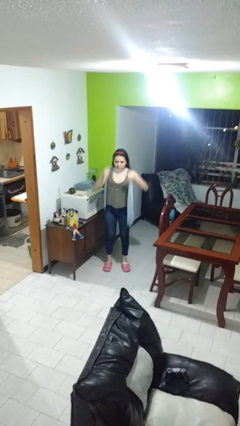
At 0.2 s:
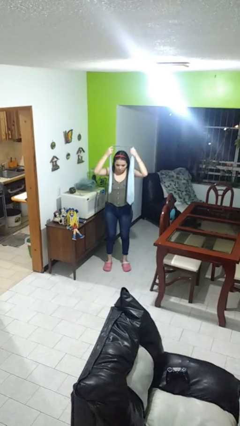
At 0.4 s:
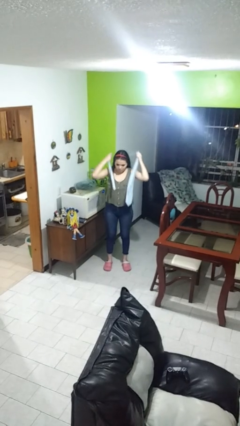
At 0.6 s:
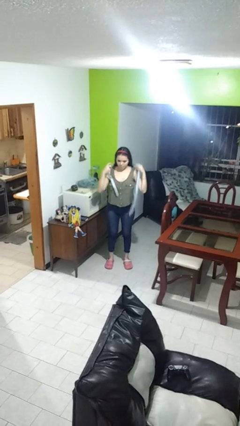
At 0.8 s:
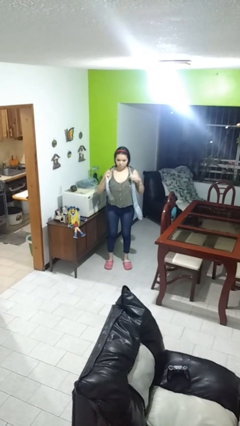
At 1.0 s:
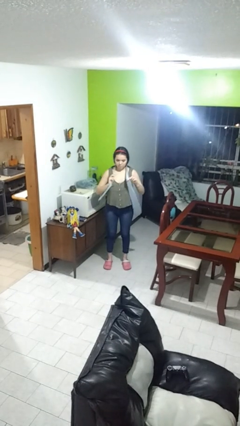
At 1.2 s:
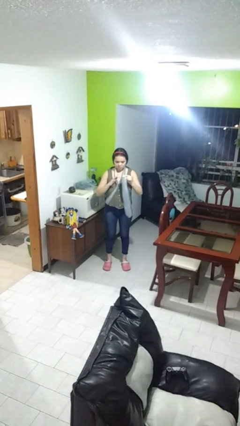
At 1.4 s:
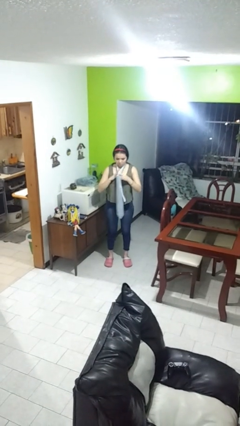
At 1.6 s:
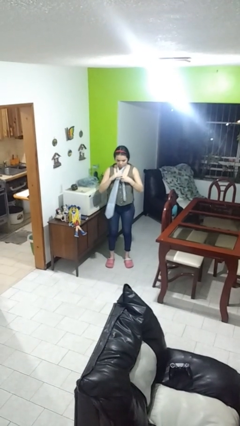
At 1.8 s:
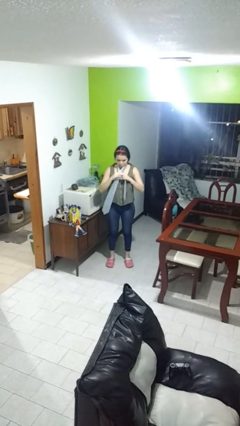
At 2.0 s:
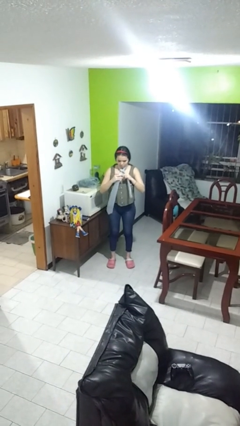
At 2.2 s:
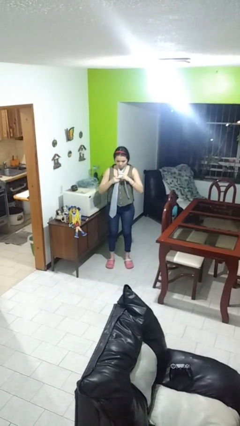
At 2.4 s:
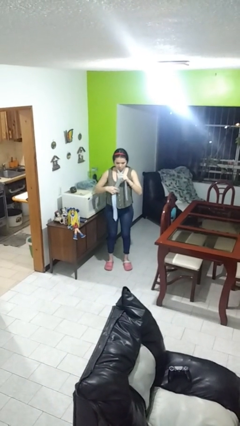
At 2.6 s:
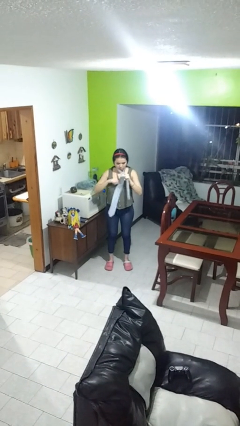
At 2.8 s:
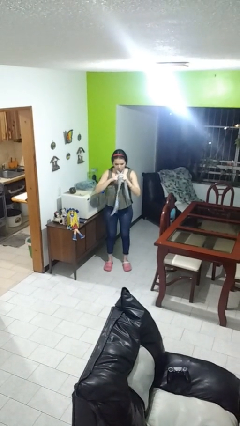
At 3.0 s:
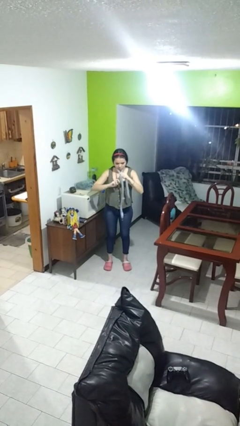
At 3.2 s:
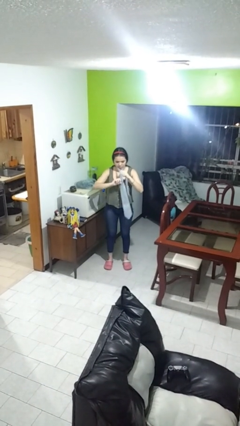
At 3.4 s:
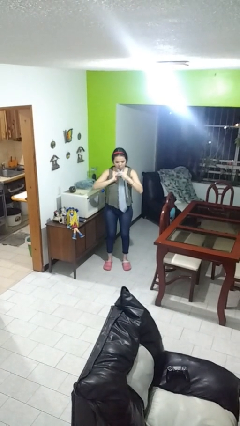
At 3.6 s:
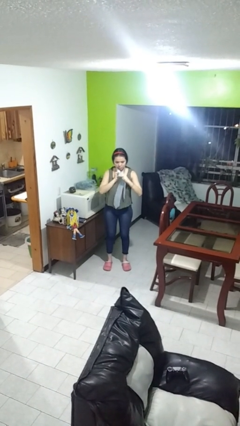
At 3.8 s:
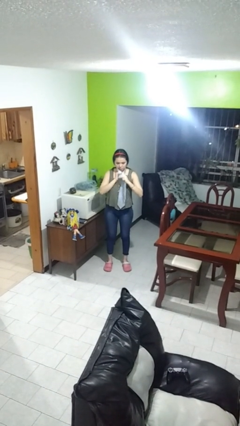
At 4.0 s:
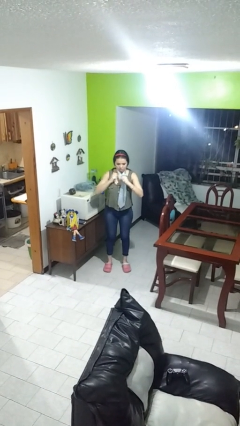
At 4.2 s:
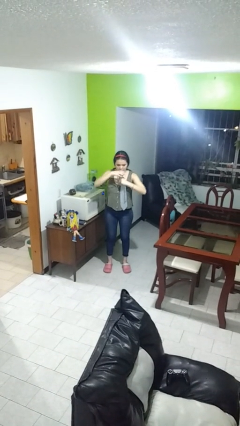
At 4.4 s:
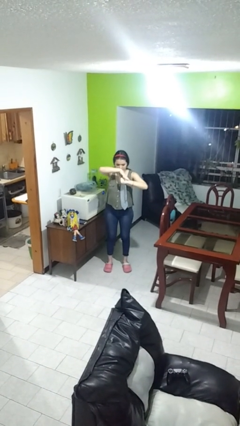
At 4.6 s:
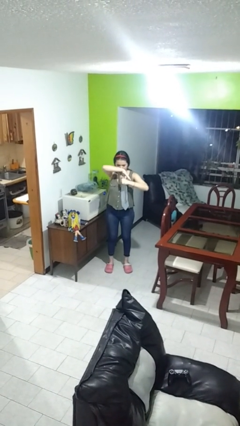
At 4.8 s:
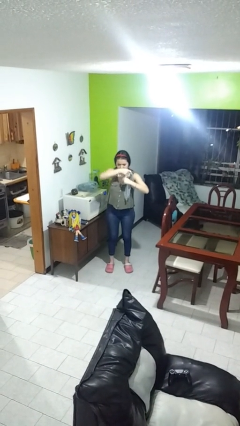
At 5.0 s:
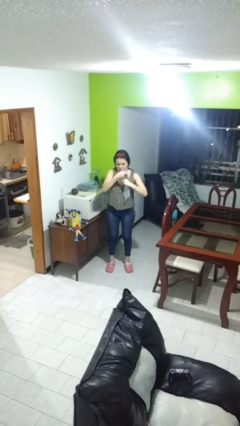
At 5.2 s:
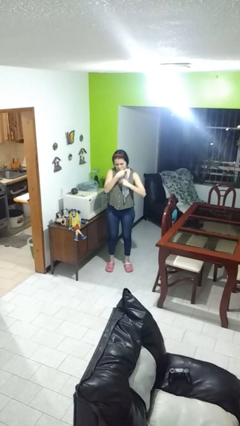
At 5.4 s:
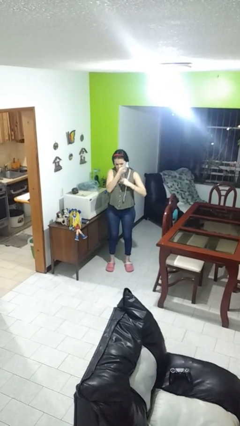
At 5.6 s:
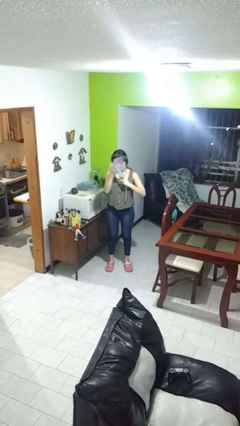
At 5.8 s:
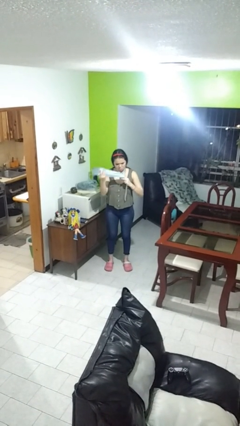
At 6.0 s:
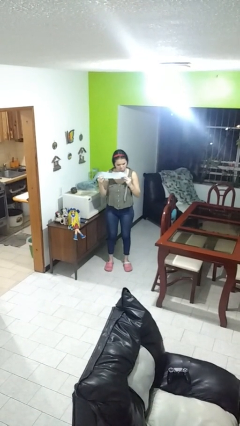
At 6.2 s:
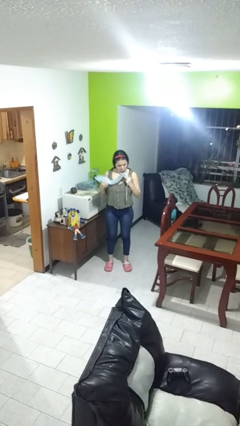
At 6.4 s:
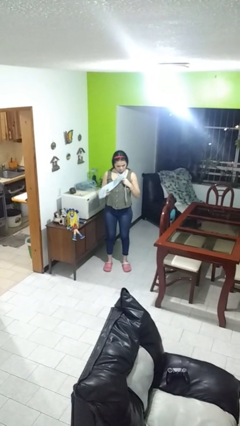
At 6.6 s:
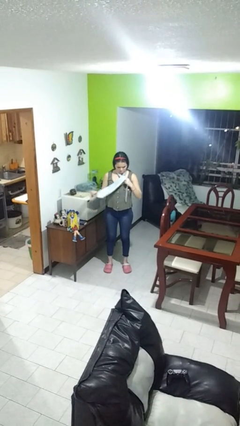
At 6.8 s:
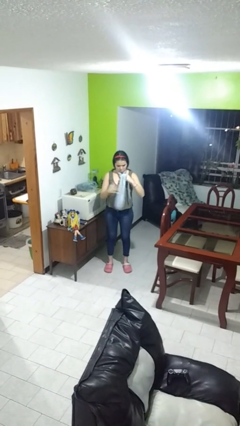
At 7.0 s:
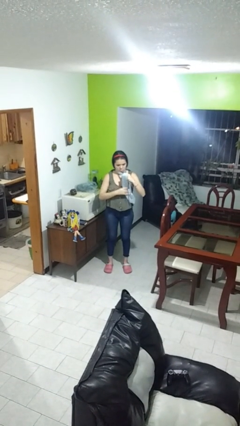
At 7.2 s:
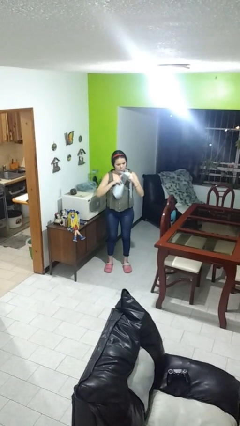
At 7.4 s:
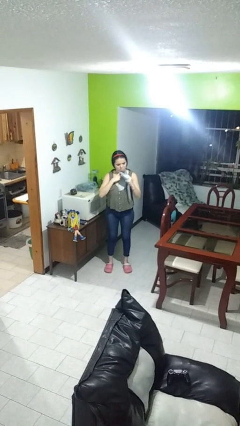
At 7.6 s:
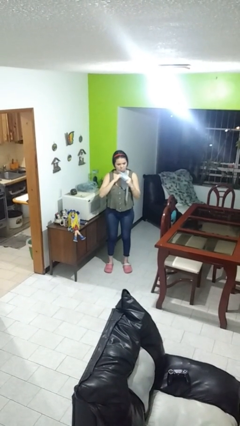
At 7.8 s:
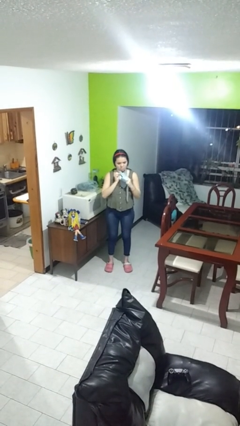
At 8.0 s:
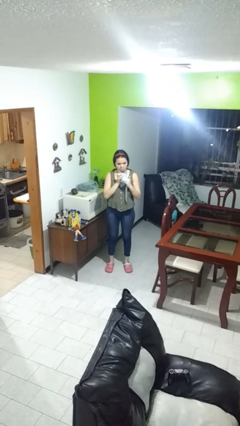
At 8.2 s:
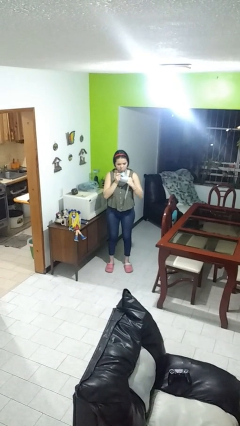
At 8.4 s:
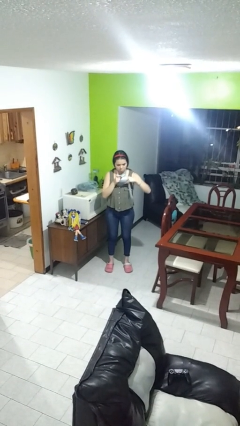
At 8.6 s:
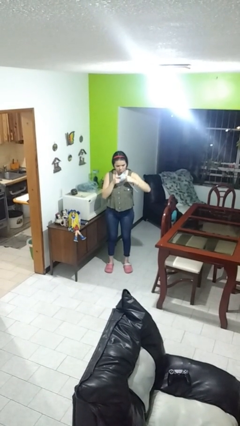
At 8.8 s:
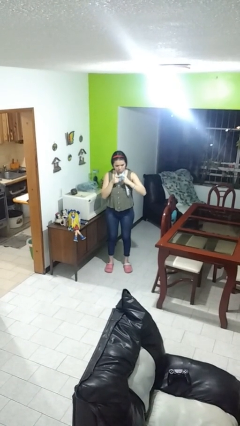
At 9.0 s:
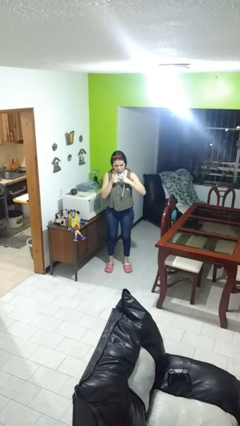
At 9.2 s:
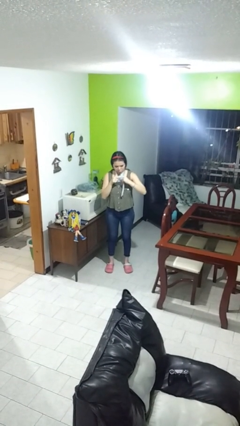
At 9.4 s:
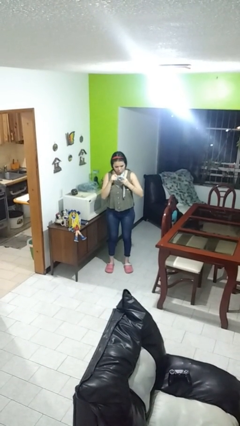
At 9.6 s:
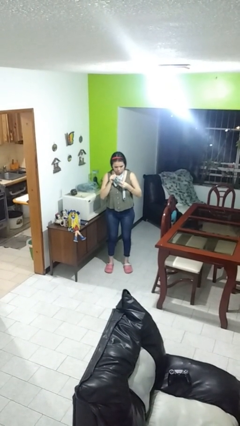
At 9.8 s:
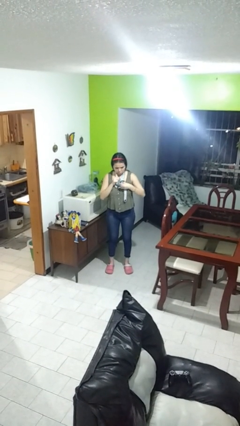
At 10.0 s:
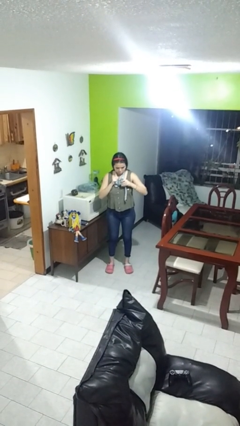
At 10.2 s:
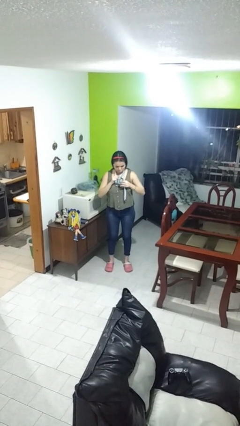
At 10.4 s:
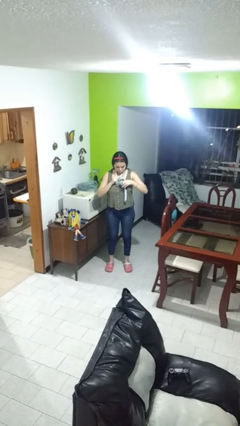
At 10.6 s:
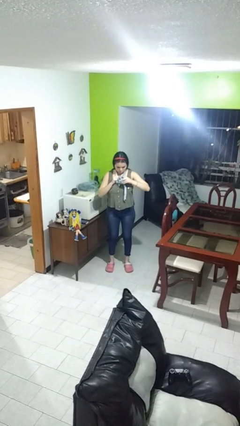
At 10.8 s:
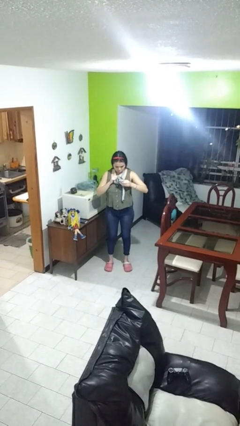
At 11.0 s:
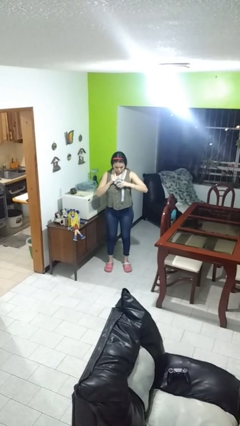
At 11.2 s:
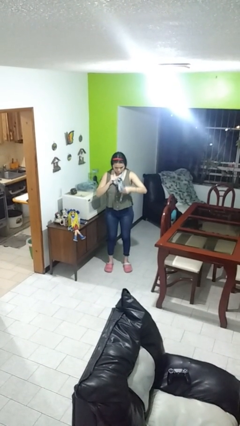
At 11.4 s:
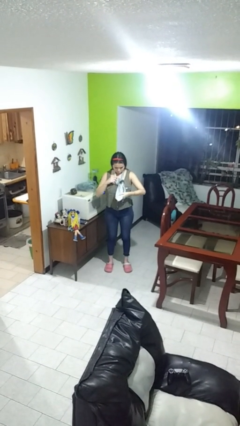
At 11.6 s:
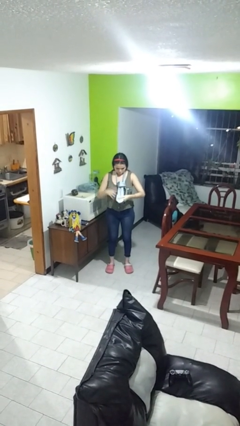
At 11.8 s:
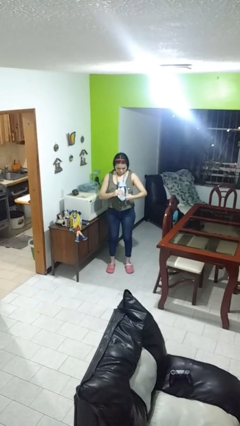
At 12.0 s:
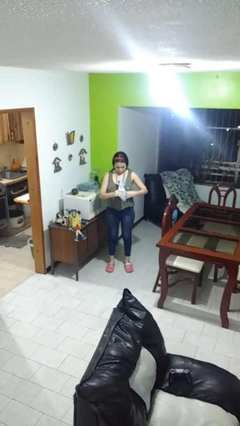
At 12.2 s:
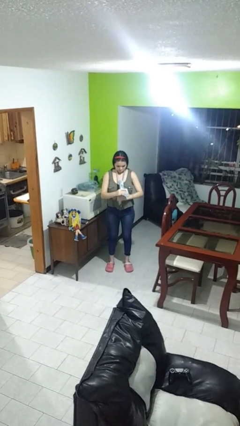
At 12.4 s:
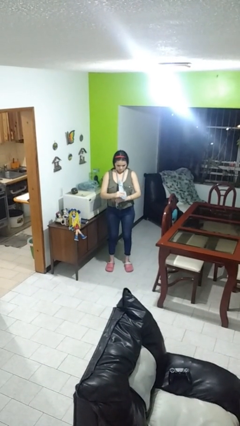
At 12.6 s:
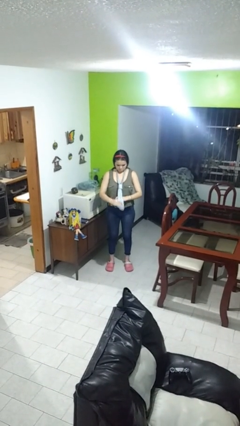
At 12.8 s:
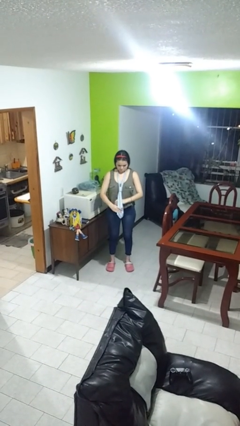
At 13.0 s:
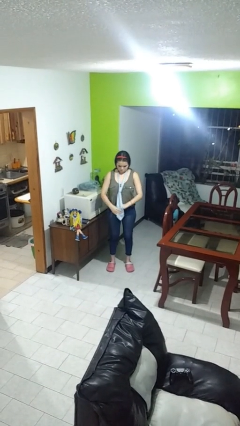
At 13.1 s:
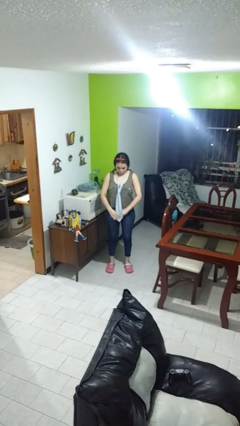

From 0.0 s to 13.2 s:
person puts on necktie

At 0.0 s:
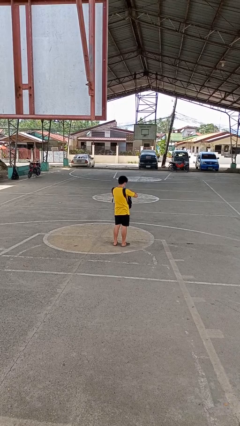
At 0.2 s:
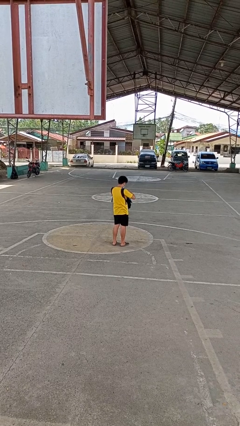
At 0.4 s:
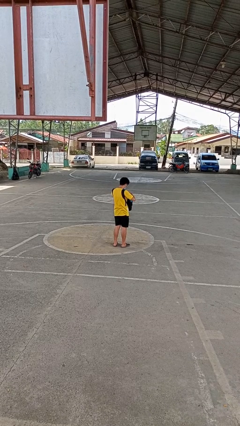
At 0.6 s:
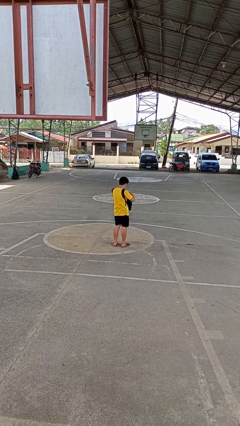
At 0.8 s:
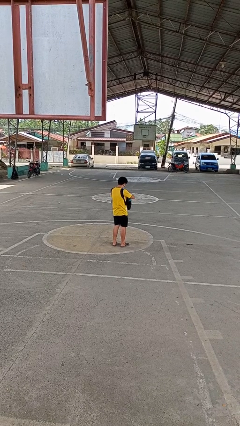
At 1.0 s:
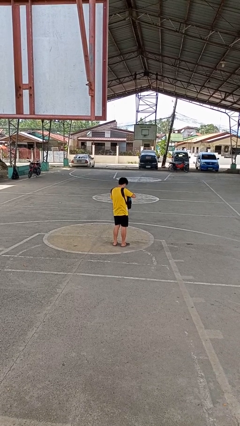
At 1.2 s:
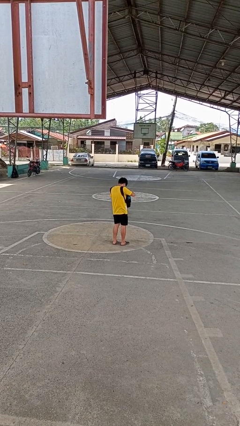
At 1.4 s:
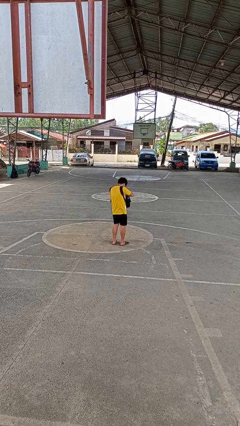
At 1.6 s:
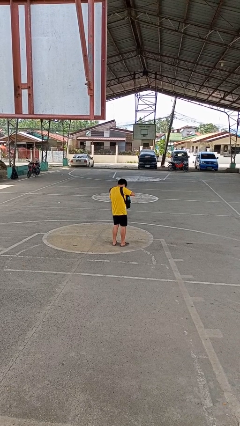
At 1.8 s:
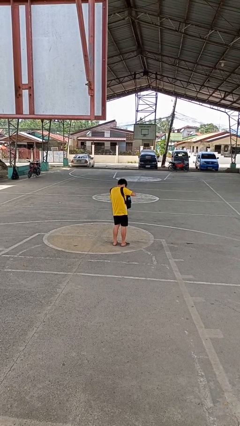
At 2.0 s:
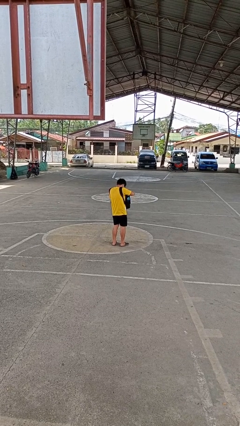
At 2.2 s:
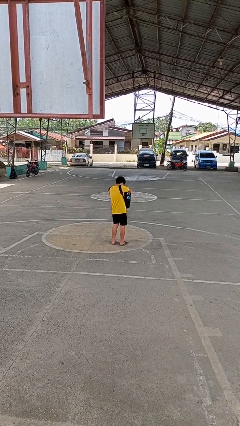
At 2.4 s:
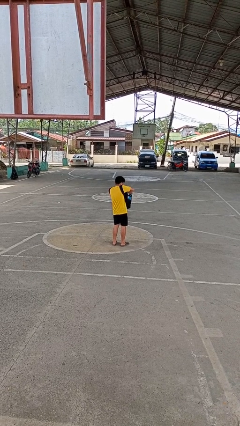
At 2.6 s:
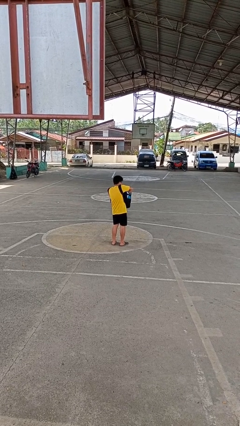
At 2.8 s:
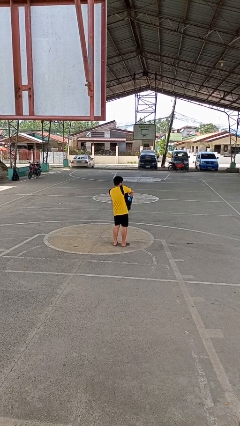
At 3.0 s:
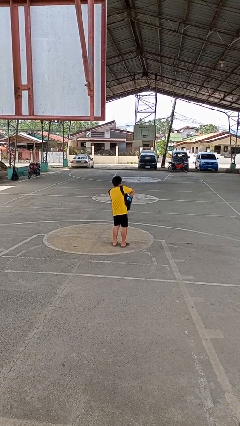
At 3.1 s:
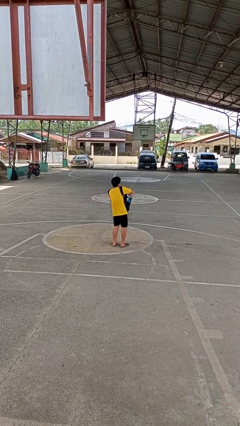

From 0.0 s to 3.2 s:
person searches in backpack

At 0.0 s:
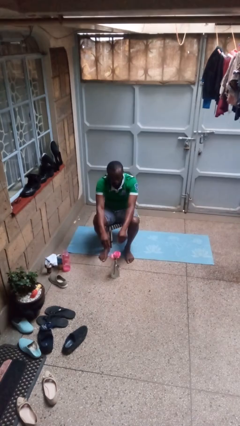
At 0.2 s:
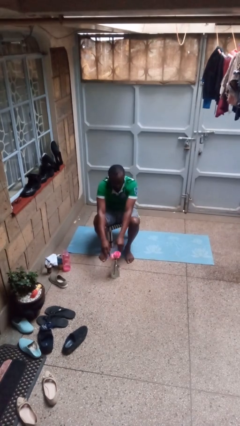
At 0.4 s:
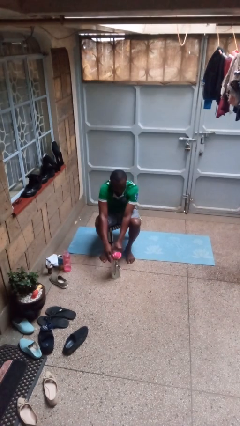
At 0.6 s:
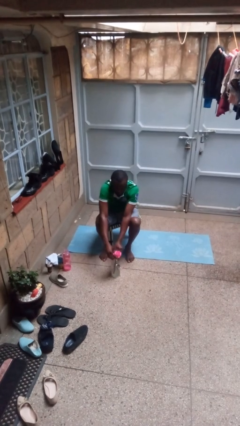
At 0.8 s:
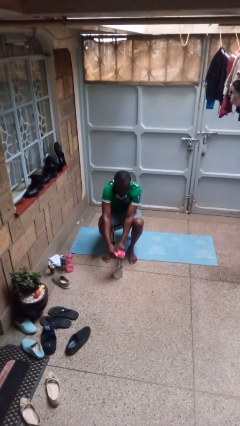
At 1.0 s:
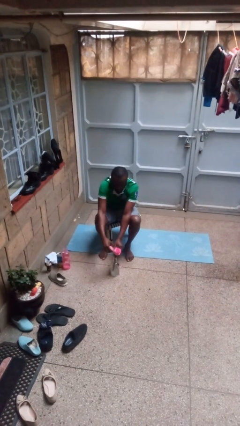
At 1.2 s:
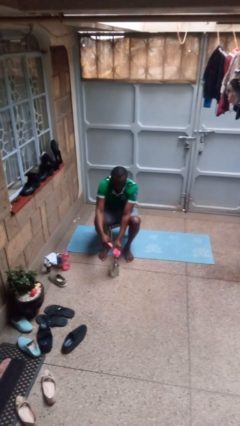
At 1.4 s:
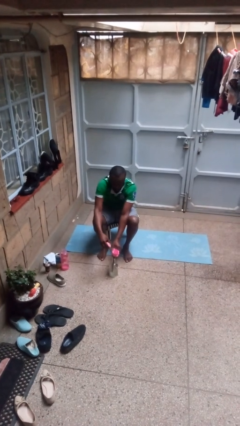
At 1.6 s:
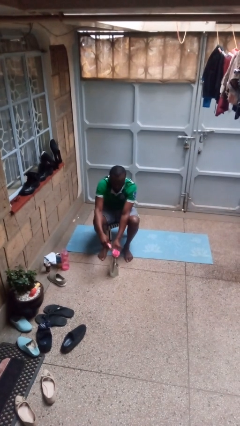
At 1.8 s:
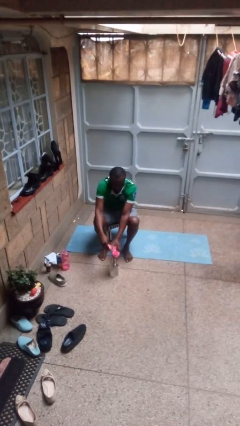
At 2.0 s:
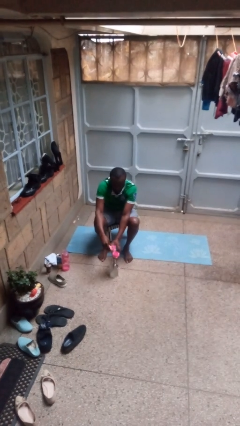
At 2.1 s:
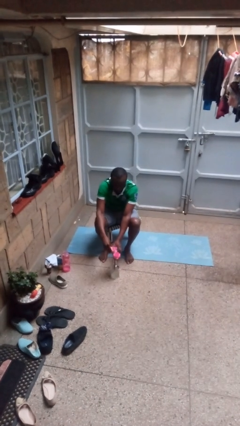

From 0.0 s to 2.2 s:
person arranges flowers in vase
